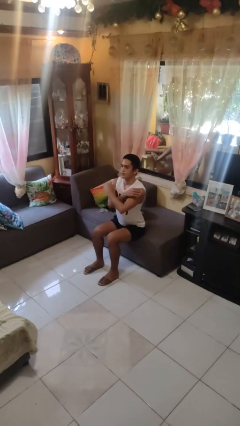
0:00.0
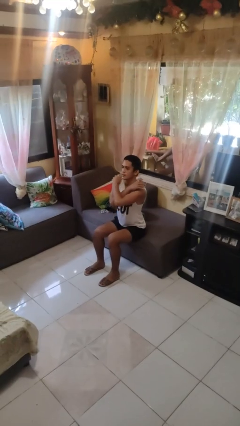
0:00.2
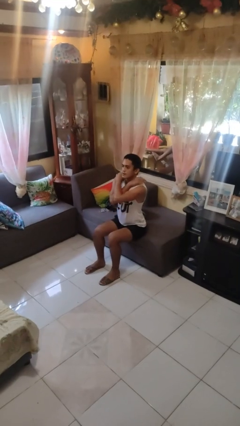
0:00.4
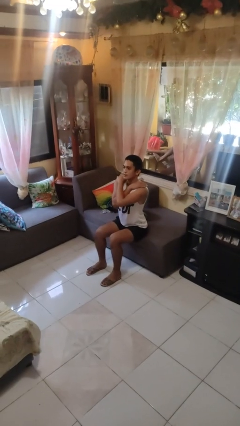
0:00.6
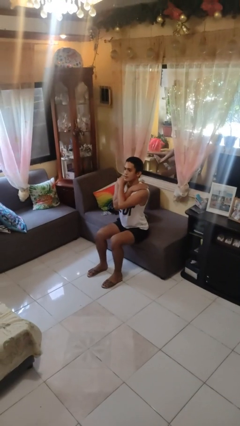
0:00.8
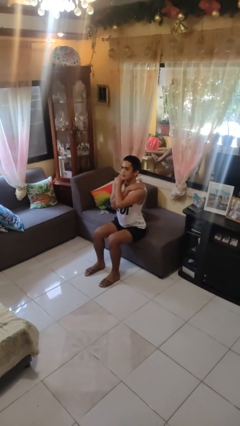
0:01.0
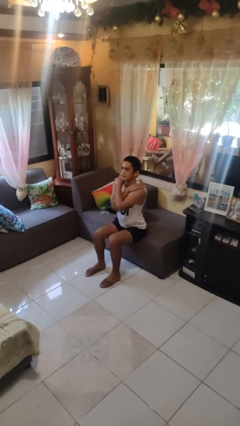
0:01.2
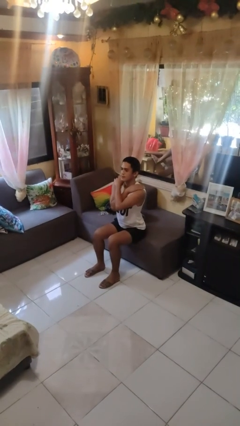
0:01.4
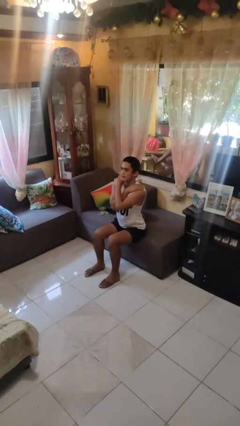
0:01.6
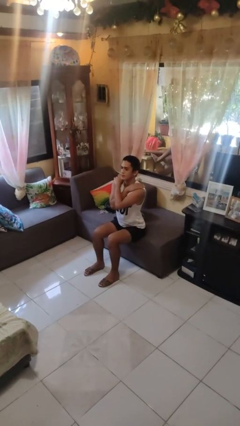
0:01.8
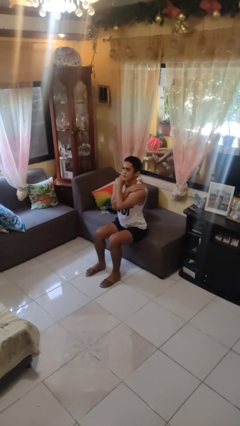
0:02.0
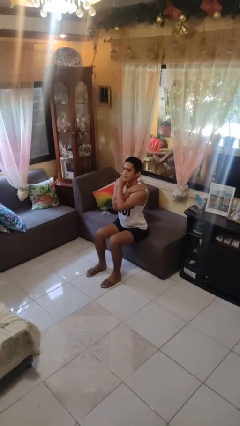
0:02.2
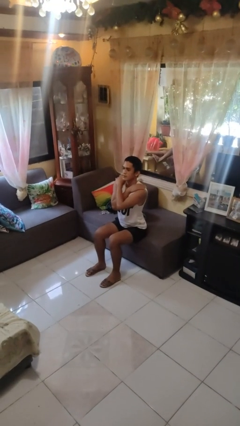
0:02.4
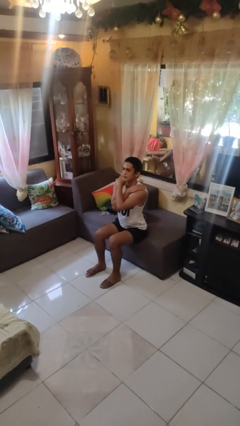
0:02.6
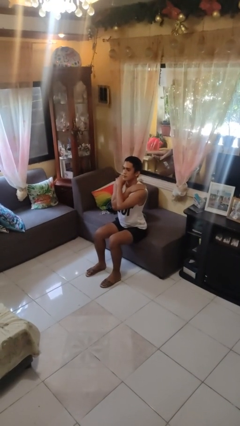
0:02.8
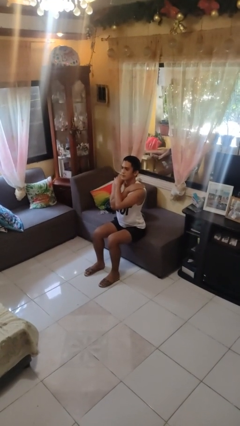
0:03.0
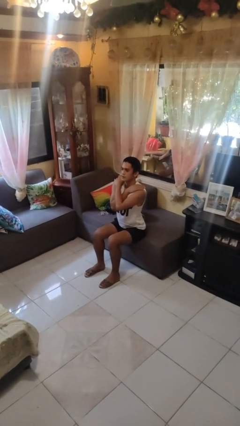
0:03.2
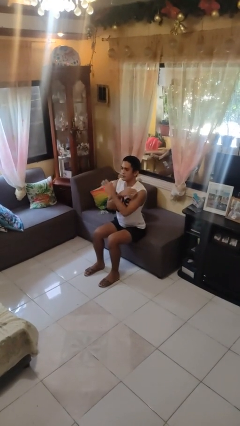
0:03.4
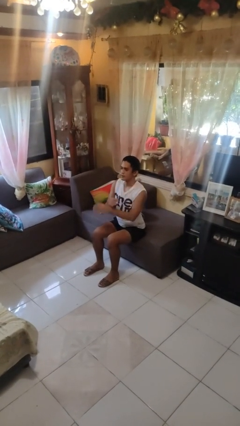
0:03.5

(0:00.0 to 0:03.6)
person crosses arms

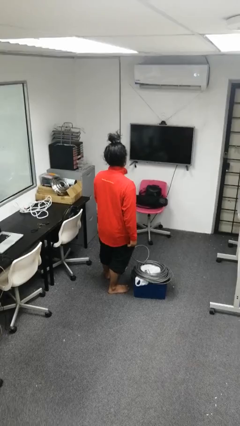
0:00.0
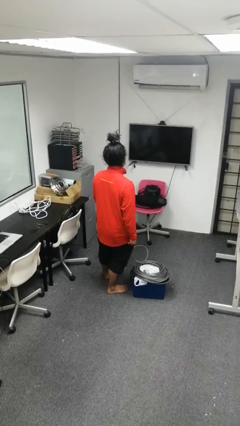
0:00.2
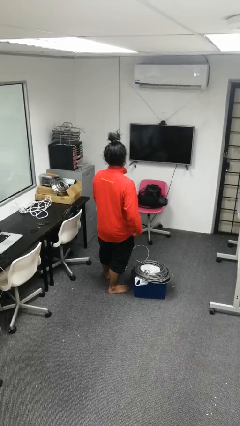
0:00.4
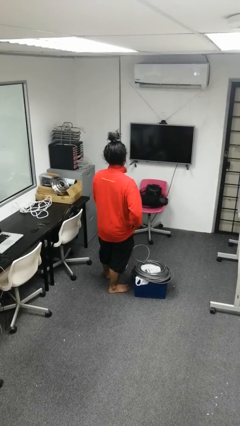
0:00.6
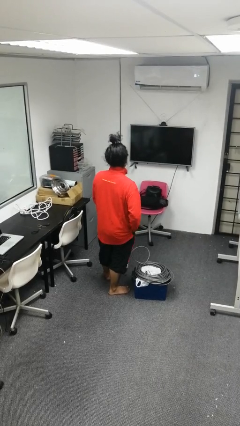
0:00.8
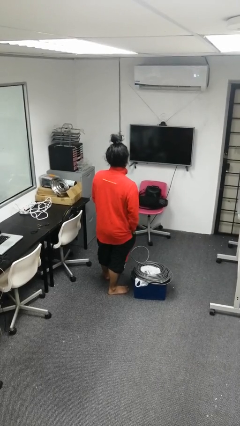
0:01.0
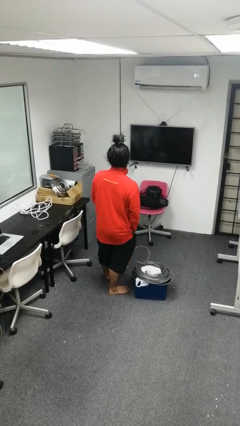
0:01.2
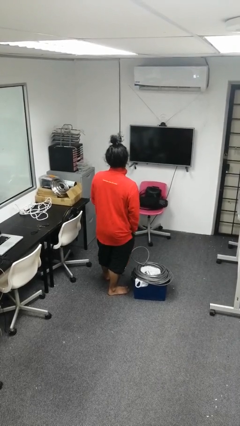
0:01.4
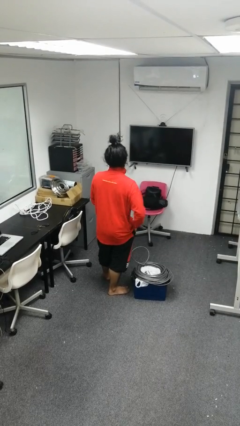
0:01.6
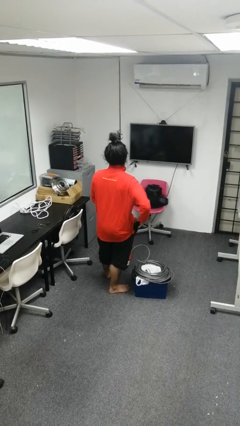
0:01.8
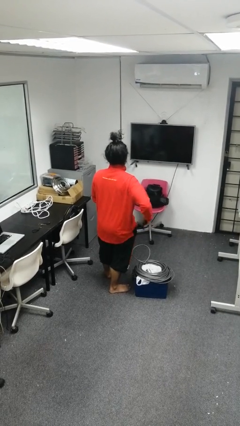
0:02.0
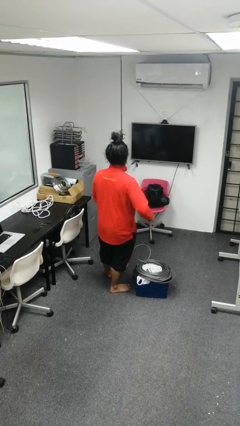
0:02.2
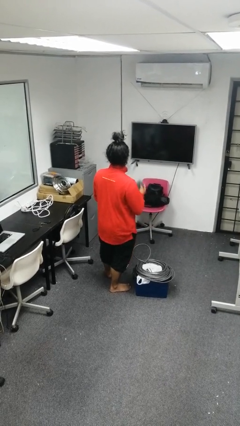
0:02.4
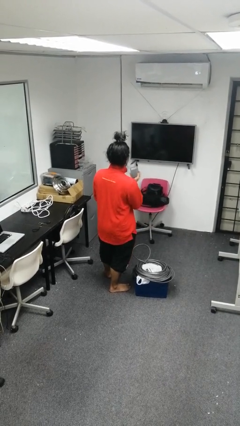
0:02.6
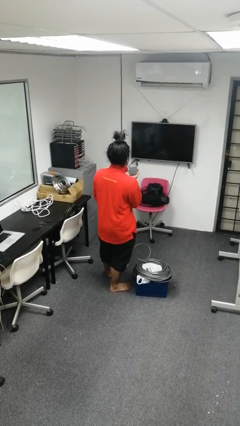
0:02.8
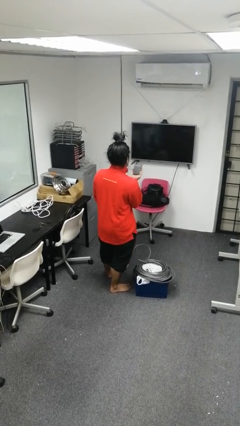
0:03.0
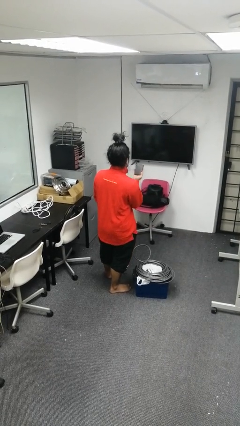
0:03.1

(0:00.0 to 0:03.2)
person takes phone from pocket

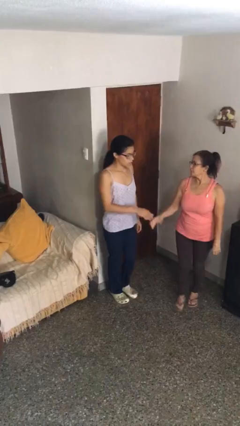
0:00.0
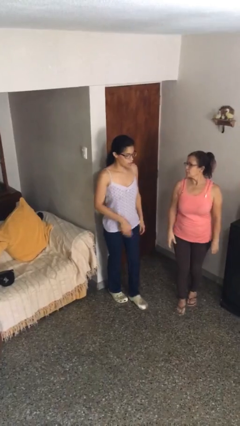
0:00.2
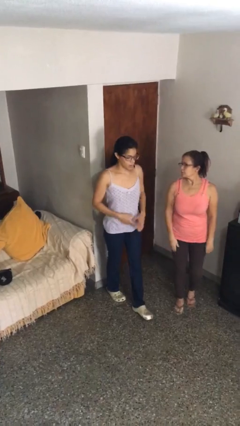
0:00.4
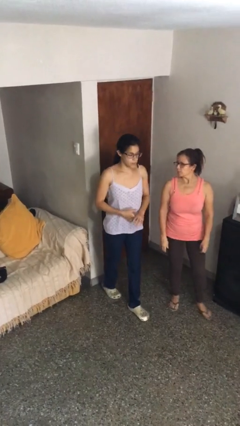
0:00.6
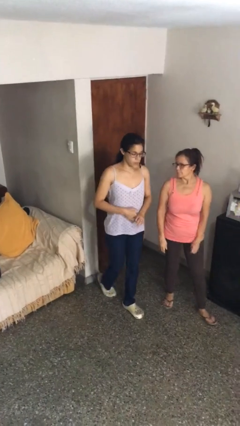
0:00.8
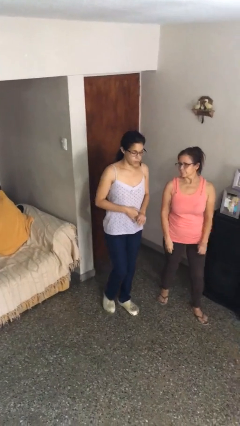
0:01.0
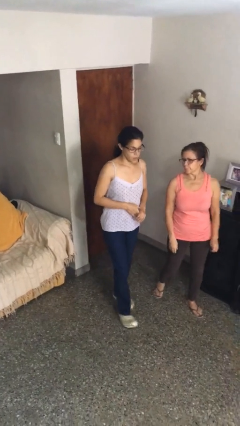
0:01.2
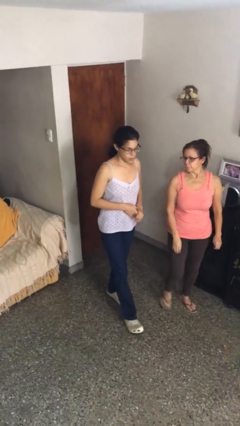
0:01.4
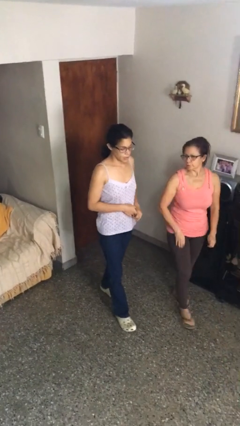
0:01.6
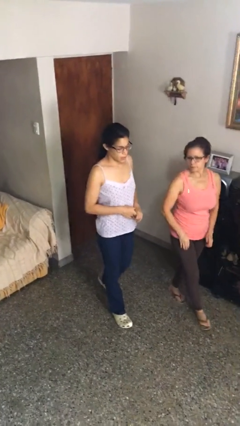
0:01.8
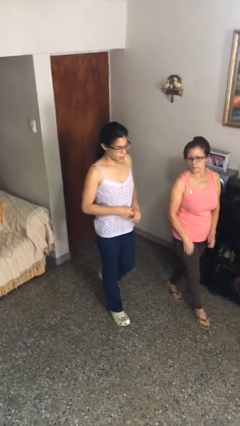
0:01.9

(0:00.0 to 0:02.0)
person talks to person

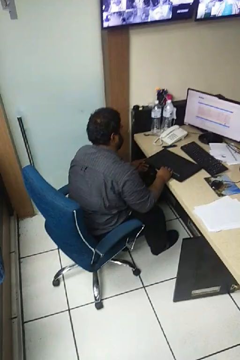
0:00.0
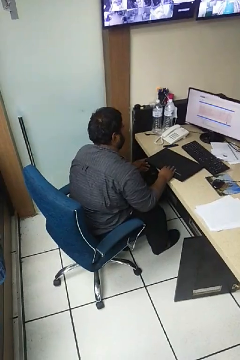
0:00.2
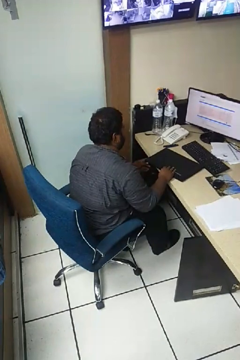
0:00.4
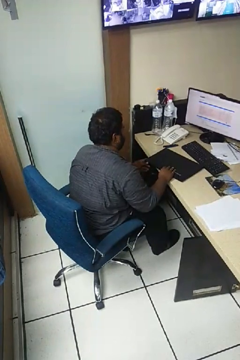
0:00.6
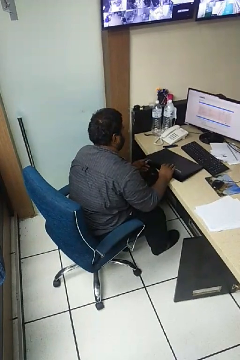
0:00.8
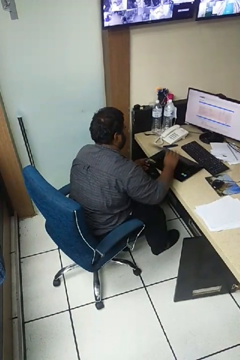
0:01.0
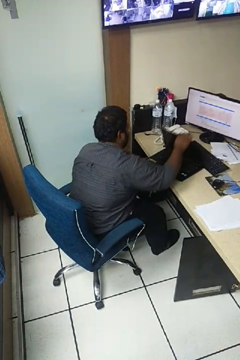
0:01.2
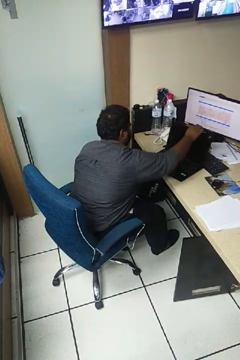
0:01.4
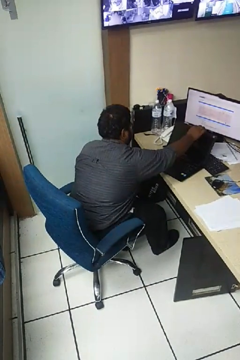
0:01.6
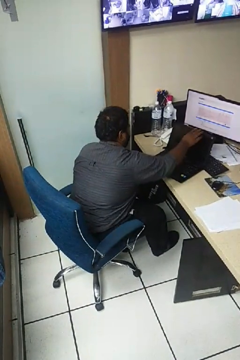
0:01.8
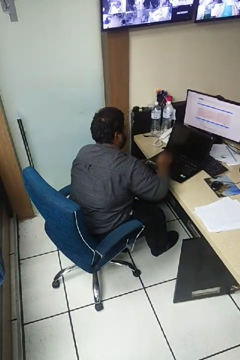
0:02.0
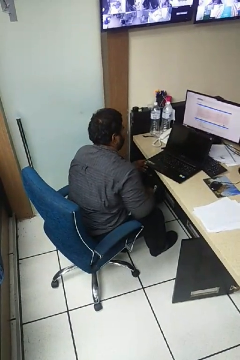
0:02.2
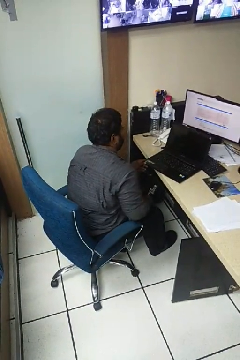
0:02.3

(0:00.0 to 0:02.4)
person opens laptop

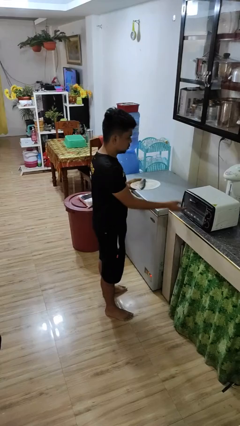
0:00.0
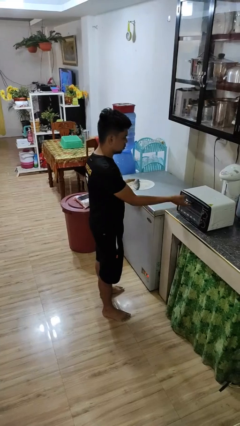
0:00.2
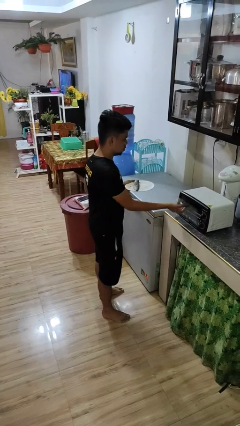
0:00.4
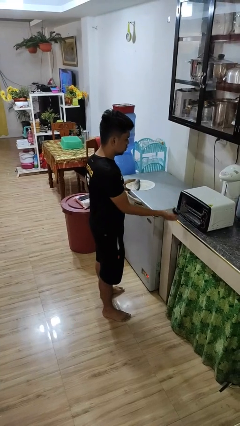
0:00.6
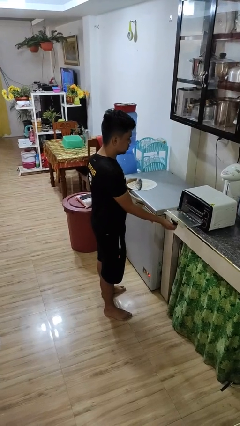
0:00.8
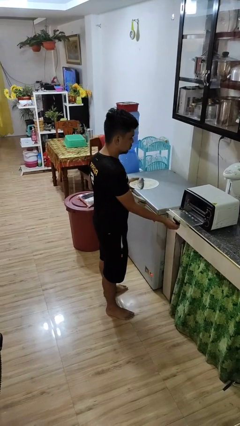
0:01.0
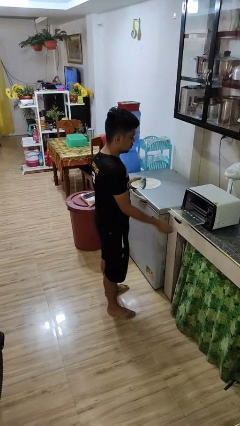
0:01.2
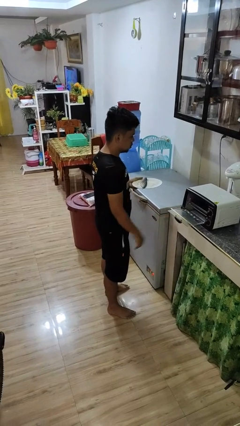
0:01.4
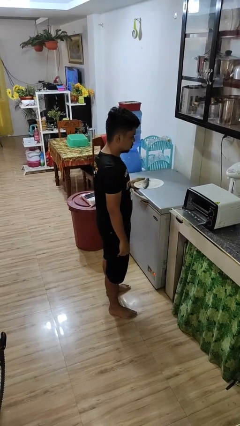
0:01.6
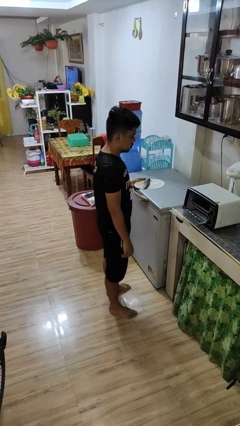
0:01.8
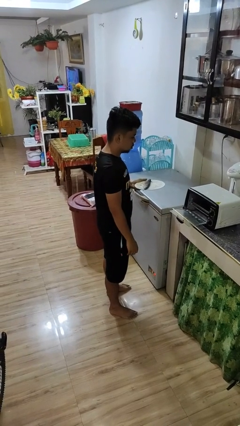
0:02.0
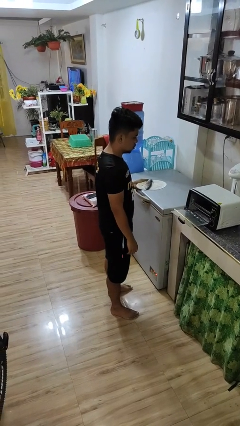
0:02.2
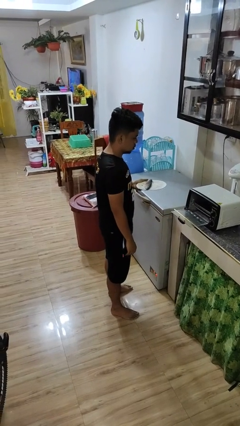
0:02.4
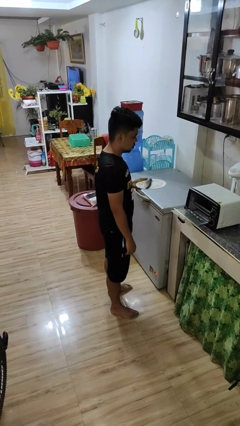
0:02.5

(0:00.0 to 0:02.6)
person opens microwave

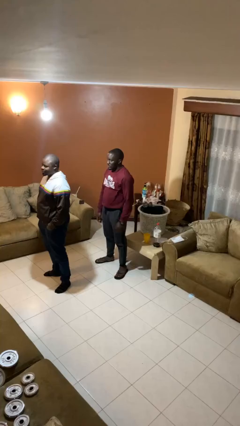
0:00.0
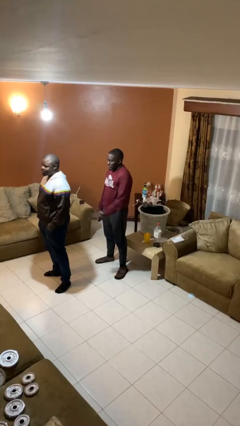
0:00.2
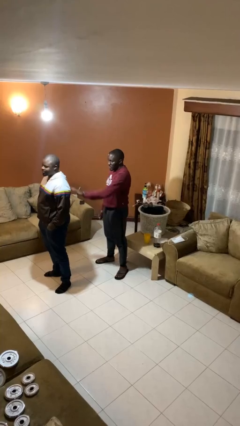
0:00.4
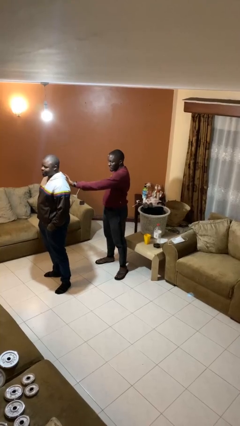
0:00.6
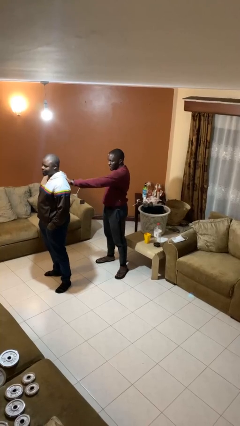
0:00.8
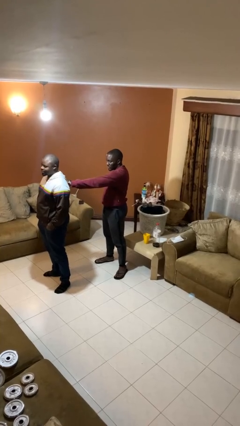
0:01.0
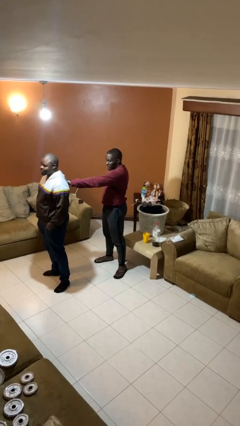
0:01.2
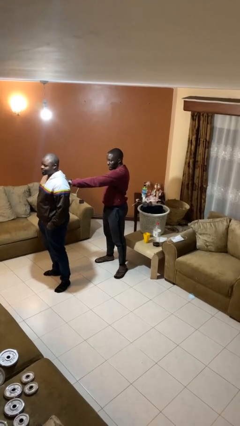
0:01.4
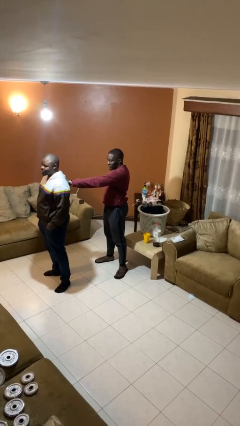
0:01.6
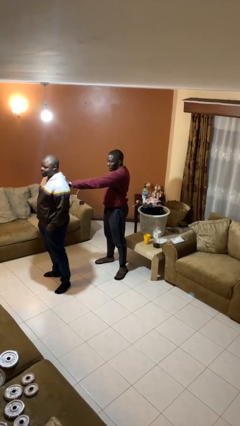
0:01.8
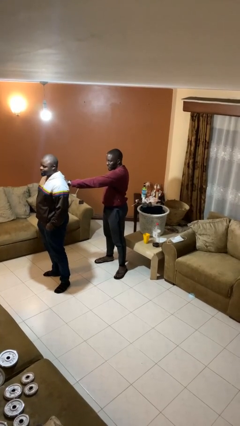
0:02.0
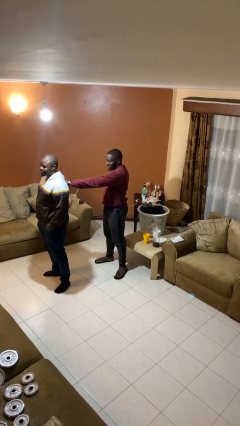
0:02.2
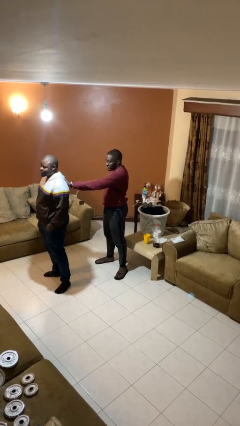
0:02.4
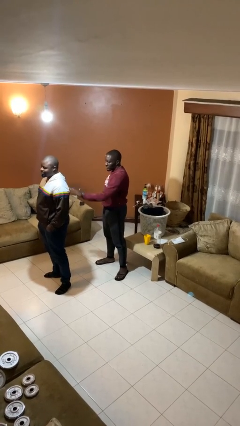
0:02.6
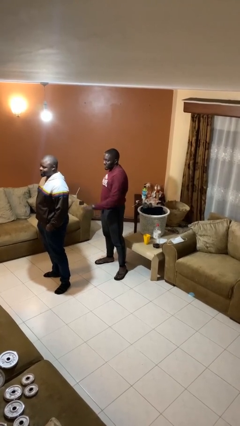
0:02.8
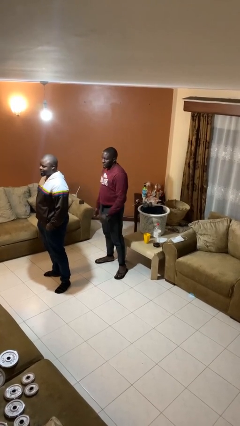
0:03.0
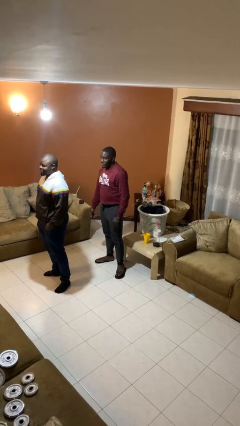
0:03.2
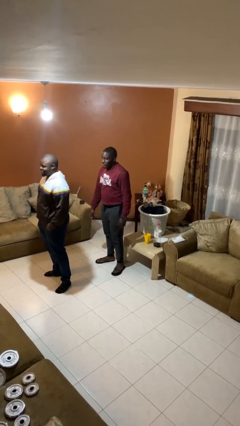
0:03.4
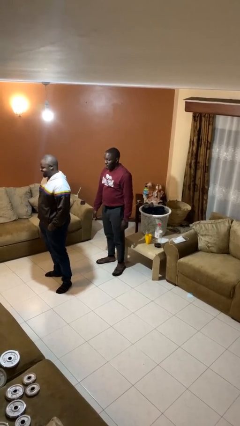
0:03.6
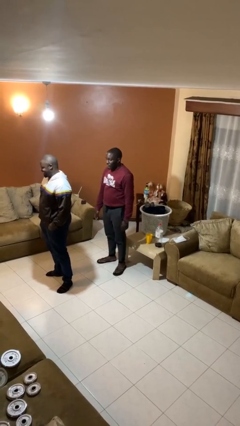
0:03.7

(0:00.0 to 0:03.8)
person touches back of person
